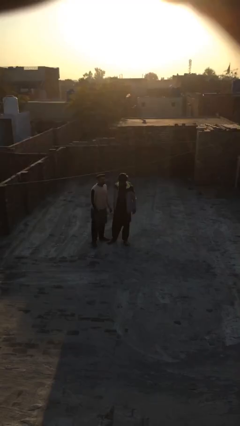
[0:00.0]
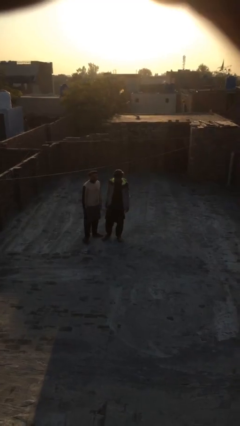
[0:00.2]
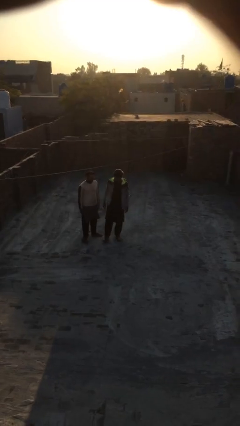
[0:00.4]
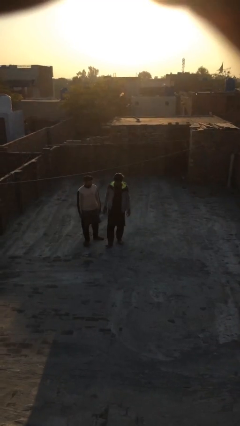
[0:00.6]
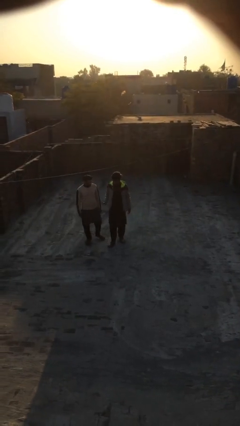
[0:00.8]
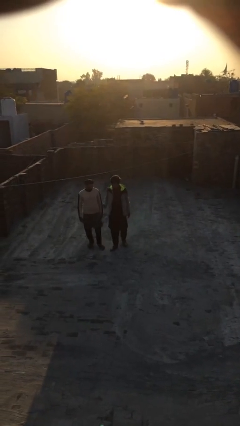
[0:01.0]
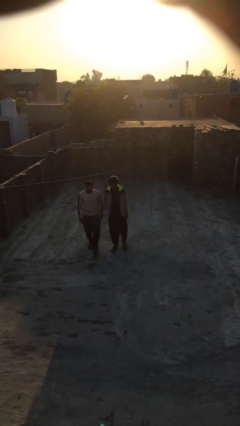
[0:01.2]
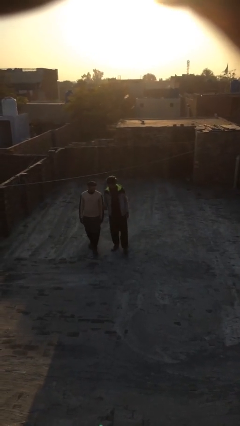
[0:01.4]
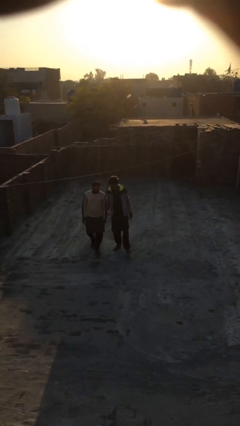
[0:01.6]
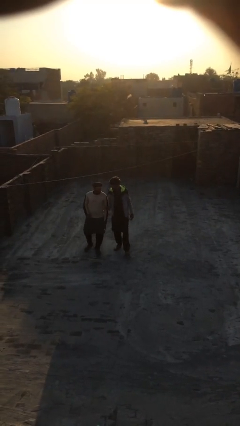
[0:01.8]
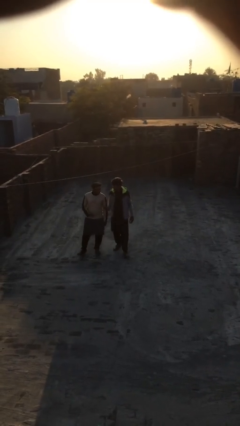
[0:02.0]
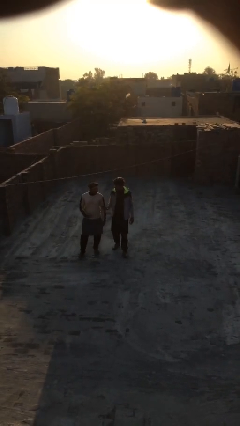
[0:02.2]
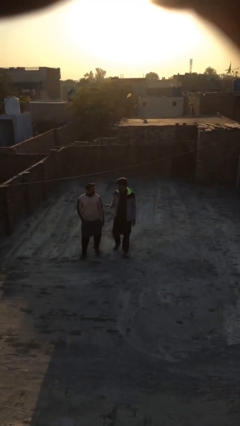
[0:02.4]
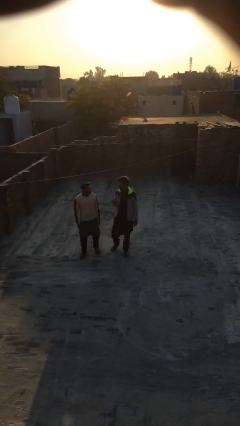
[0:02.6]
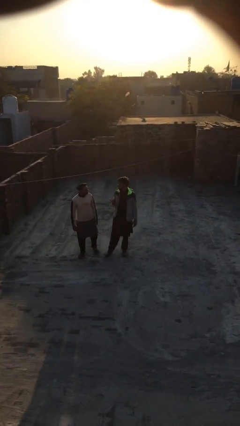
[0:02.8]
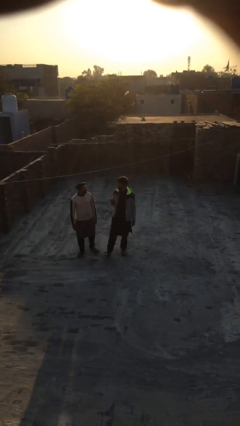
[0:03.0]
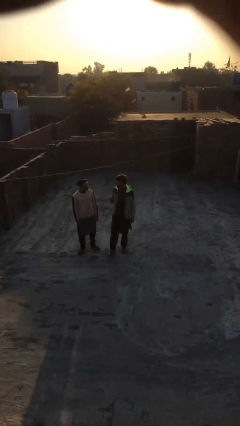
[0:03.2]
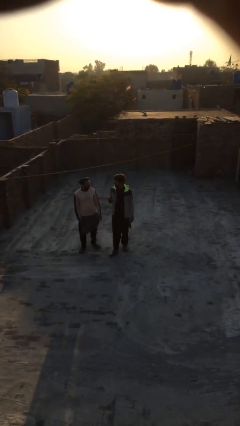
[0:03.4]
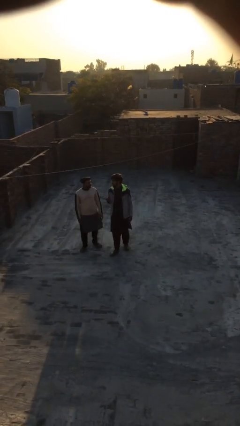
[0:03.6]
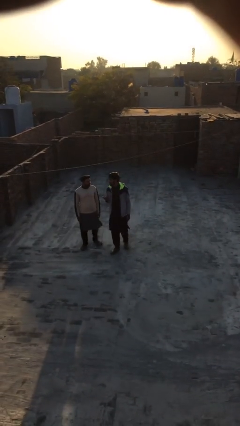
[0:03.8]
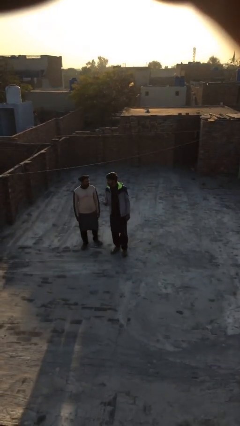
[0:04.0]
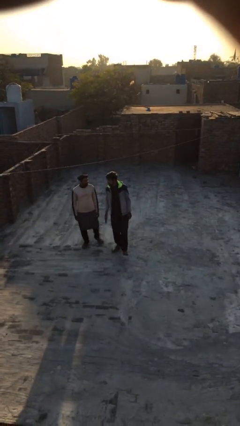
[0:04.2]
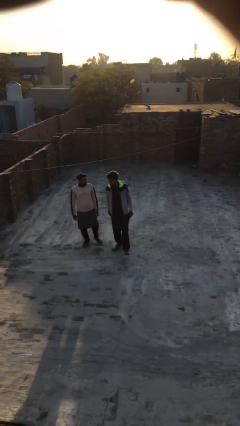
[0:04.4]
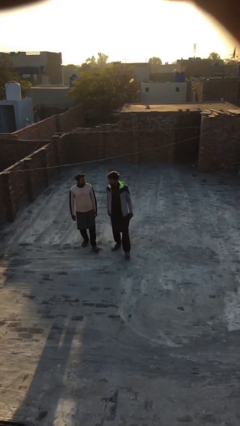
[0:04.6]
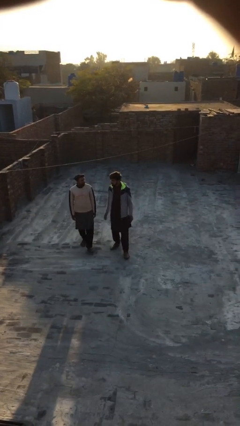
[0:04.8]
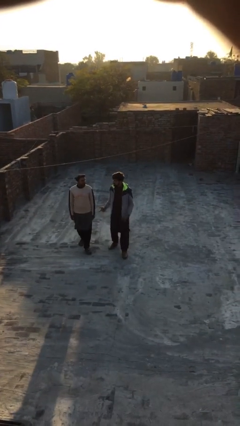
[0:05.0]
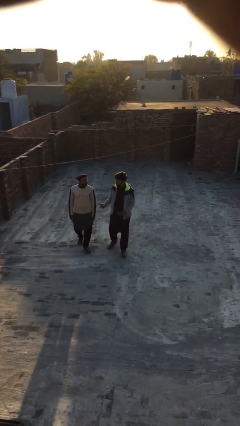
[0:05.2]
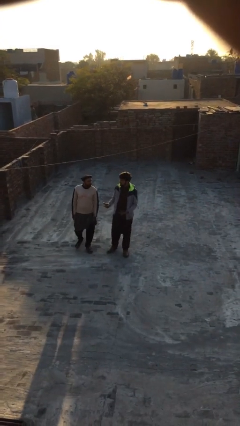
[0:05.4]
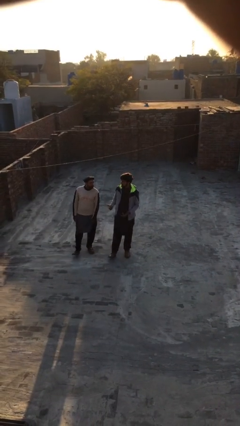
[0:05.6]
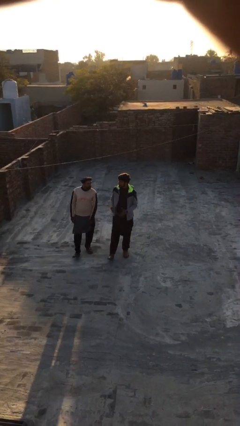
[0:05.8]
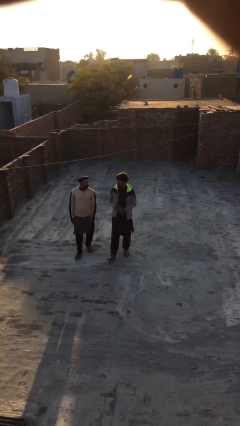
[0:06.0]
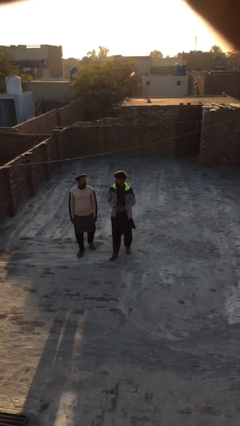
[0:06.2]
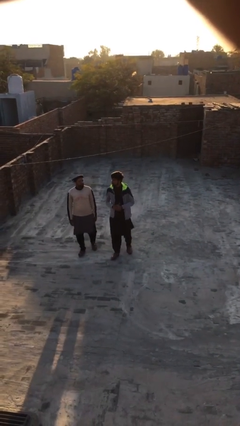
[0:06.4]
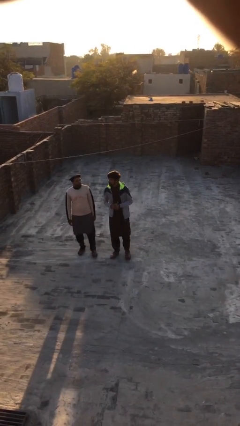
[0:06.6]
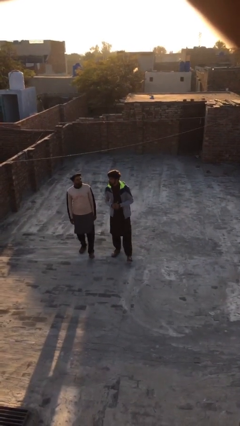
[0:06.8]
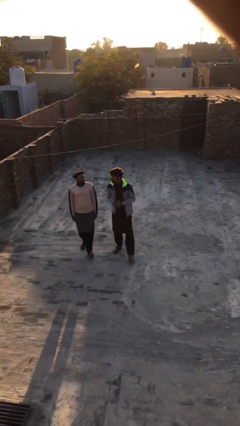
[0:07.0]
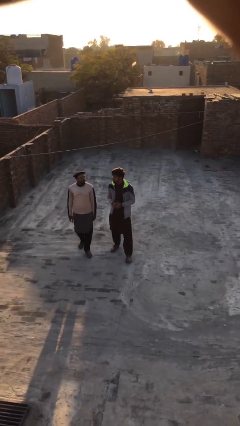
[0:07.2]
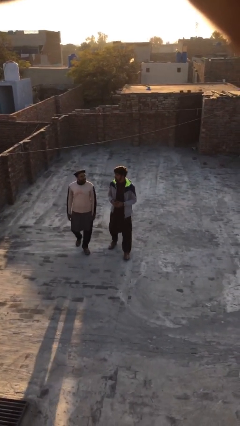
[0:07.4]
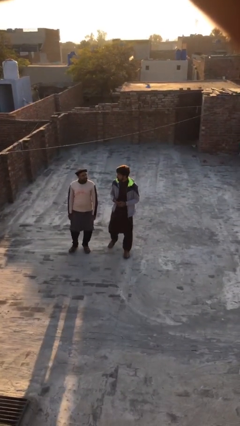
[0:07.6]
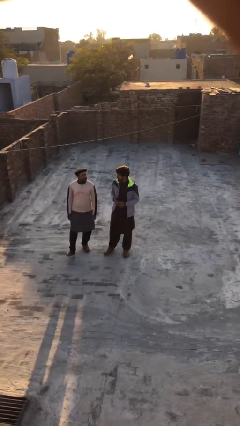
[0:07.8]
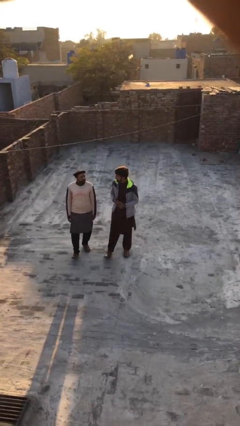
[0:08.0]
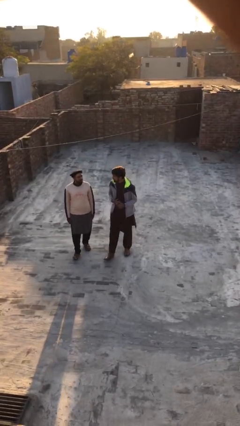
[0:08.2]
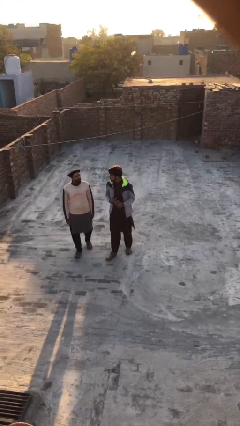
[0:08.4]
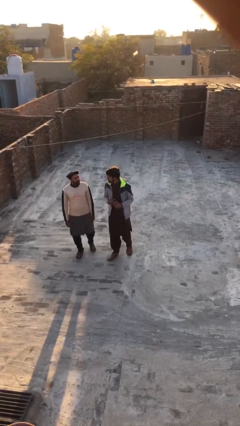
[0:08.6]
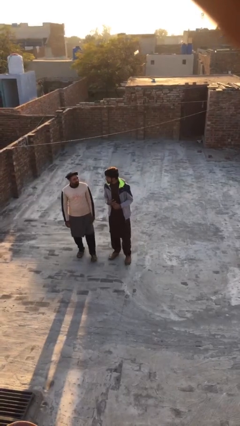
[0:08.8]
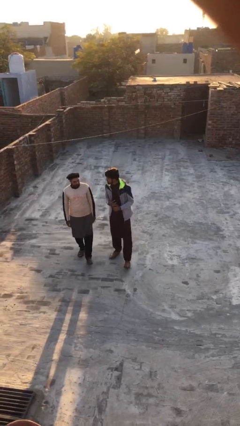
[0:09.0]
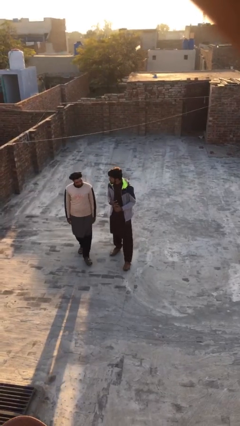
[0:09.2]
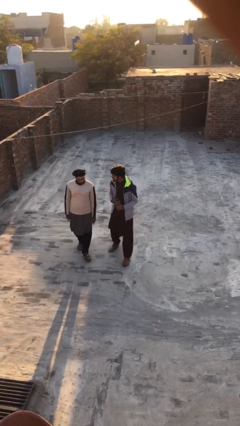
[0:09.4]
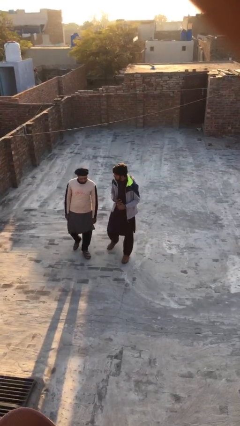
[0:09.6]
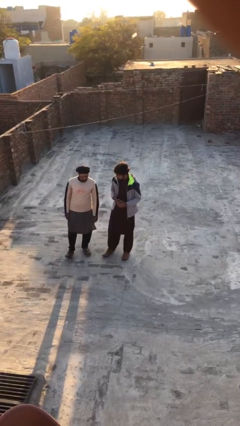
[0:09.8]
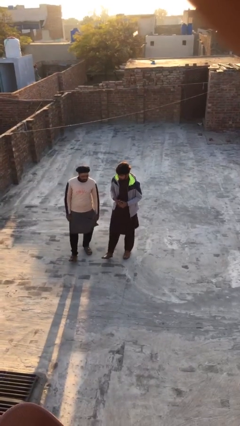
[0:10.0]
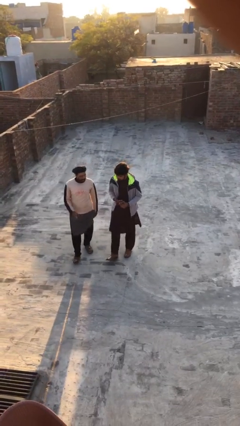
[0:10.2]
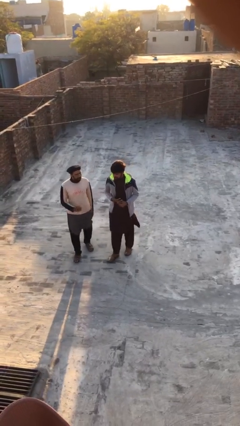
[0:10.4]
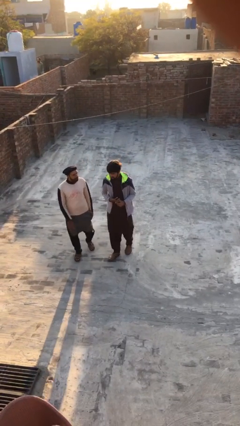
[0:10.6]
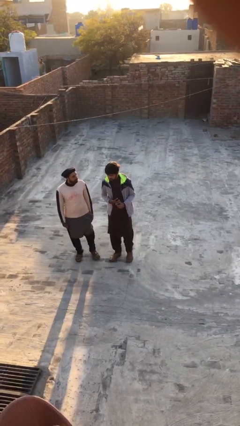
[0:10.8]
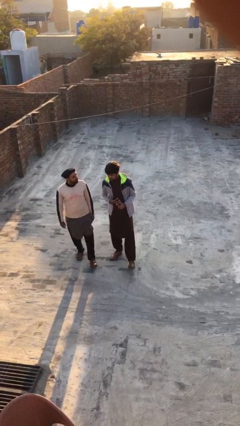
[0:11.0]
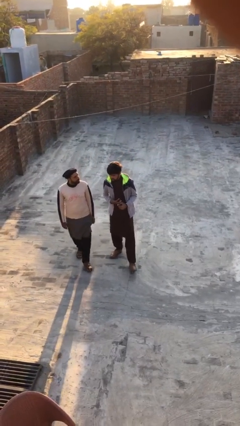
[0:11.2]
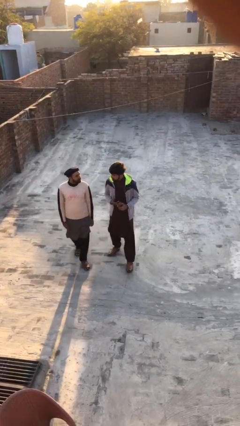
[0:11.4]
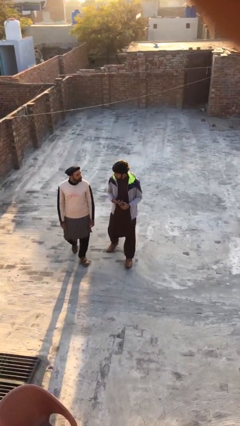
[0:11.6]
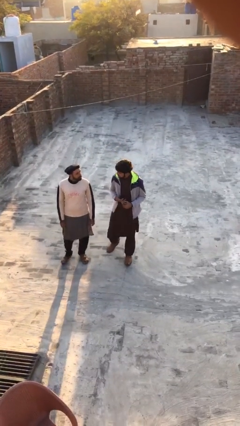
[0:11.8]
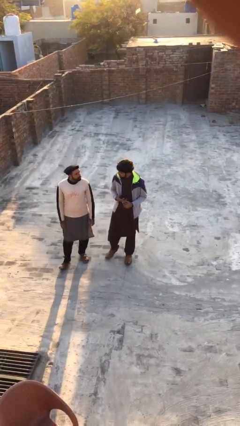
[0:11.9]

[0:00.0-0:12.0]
person talks to person

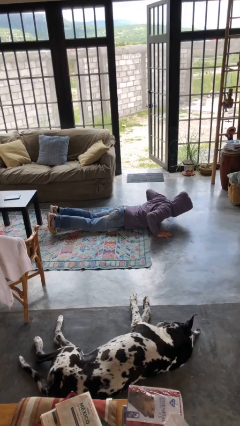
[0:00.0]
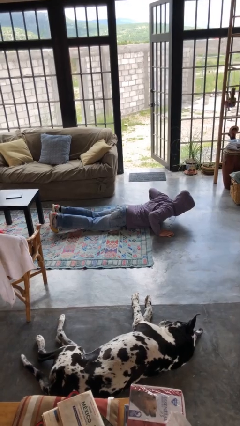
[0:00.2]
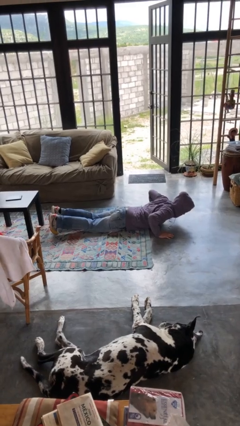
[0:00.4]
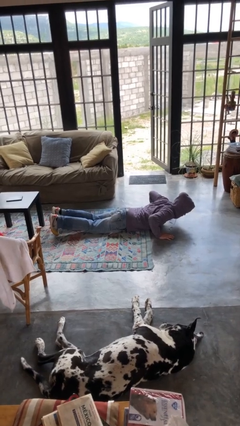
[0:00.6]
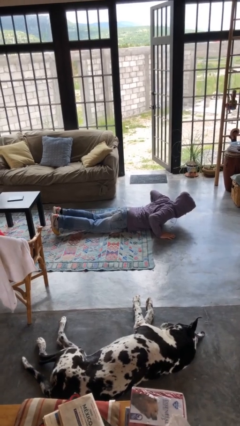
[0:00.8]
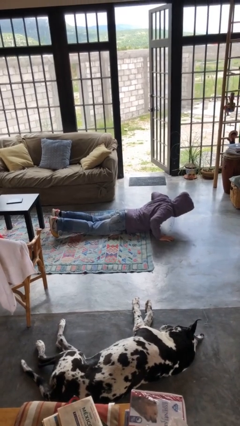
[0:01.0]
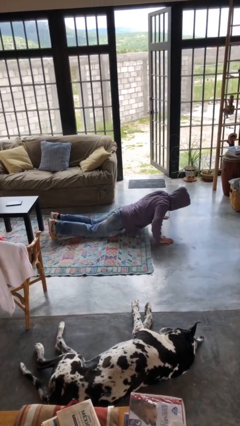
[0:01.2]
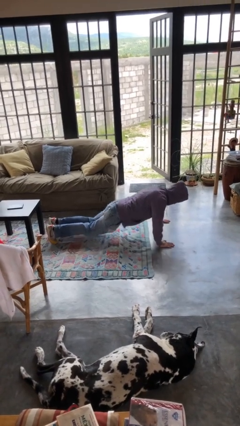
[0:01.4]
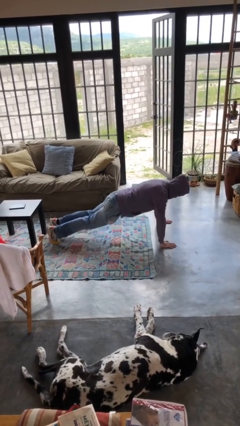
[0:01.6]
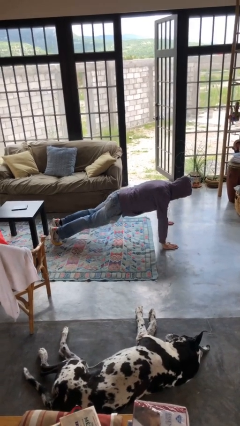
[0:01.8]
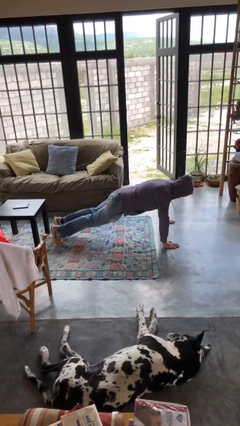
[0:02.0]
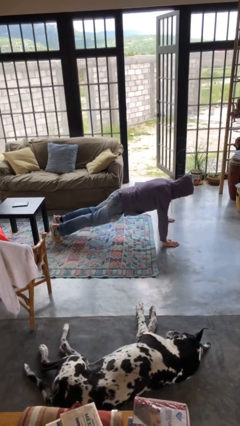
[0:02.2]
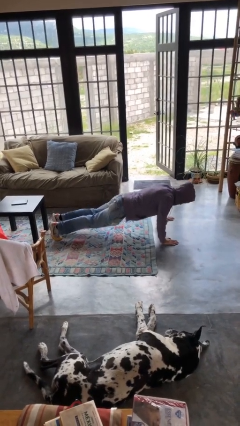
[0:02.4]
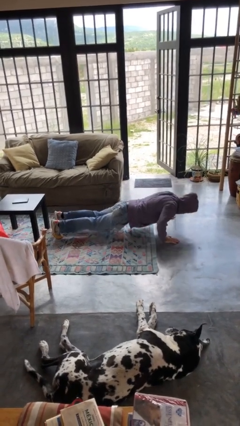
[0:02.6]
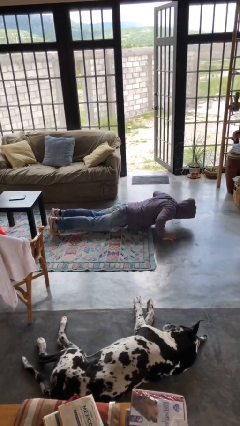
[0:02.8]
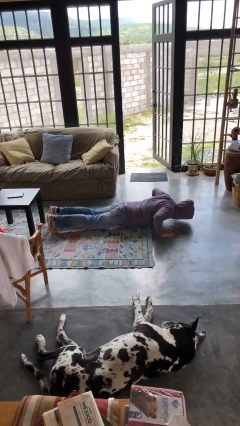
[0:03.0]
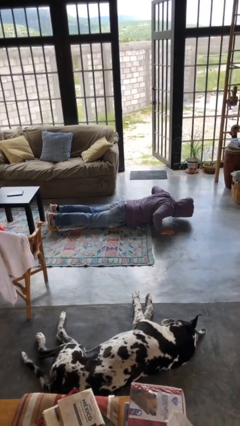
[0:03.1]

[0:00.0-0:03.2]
person exercises with pushup

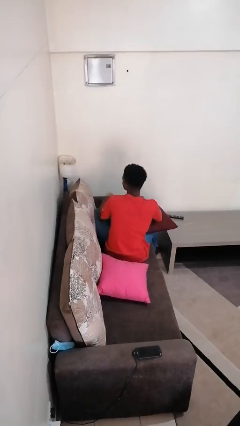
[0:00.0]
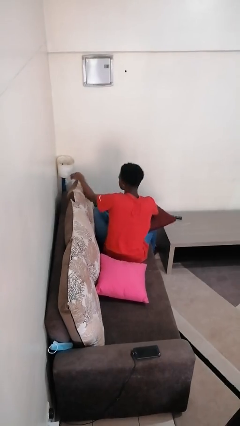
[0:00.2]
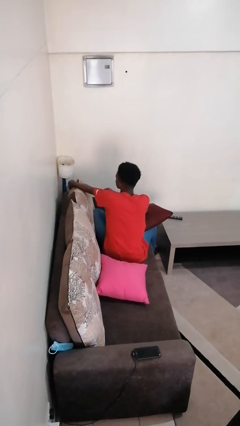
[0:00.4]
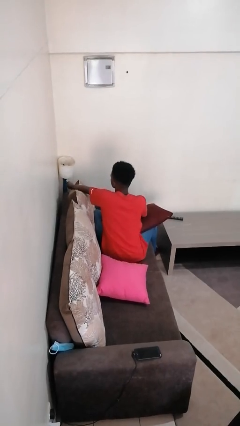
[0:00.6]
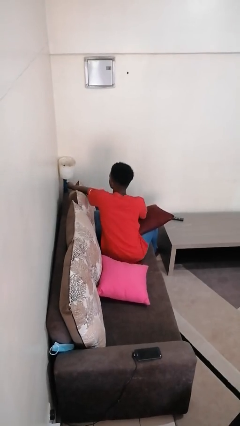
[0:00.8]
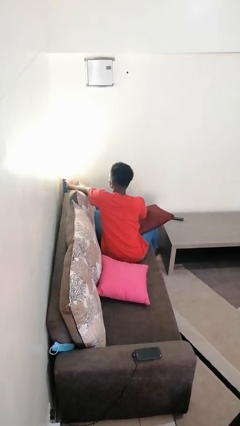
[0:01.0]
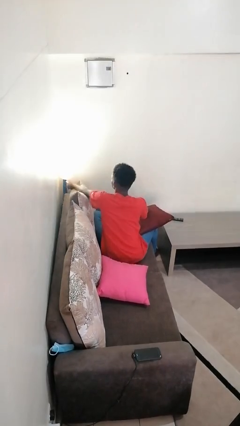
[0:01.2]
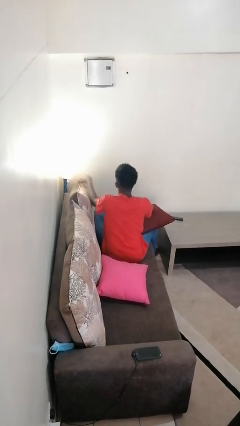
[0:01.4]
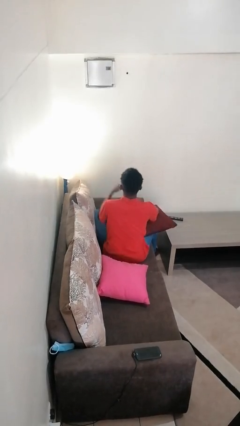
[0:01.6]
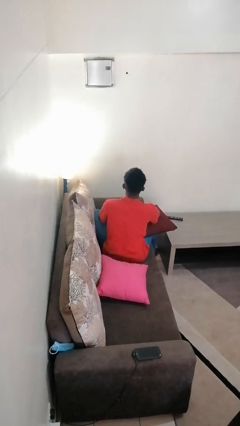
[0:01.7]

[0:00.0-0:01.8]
person turns on lamp

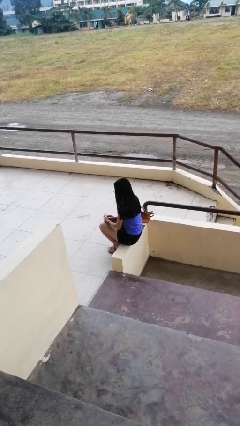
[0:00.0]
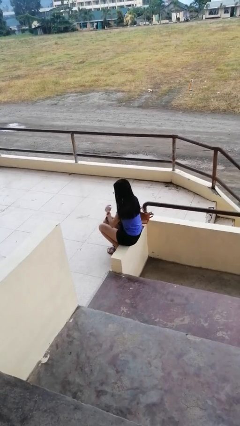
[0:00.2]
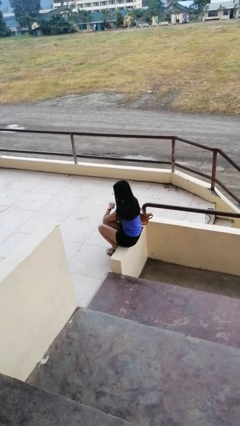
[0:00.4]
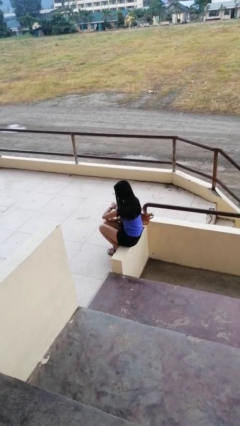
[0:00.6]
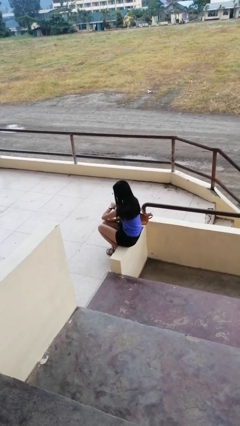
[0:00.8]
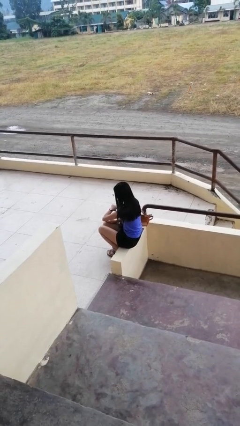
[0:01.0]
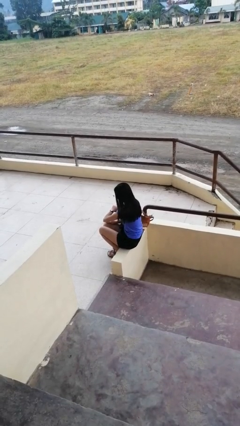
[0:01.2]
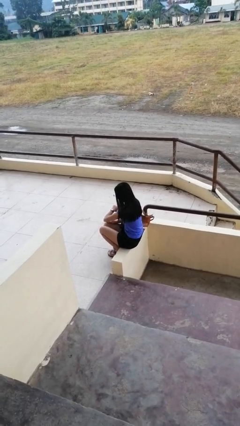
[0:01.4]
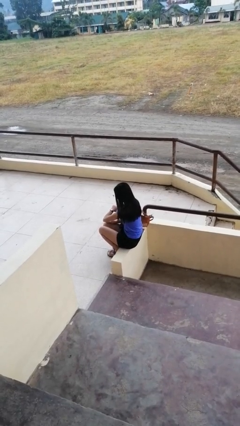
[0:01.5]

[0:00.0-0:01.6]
person looks at wristwatch
